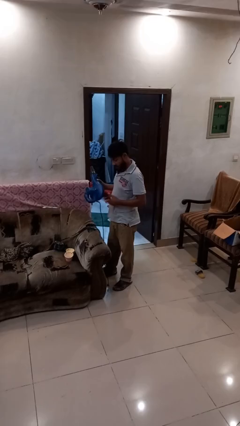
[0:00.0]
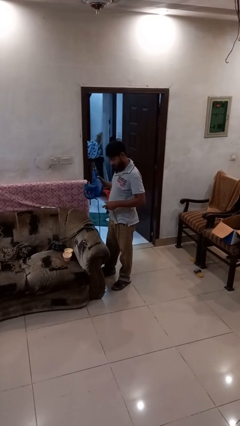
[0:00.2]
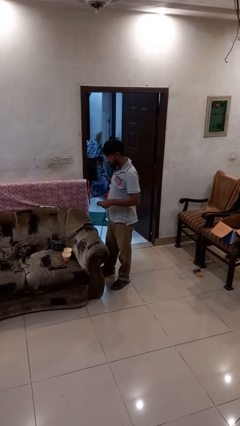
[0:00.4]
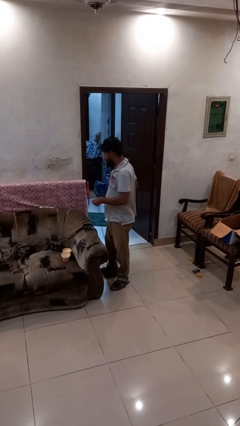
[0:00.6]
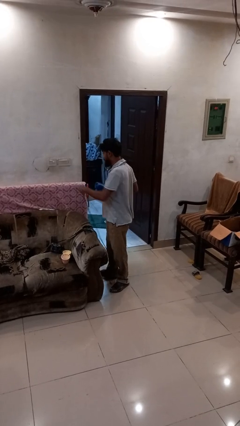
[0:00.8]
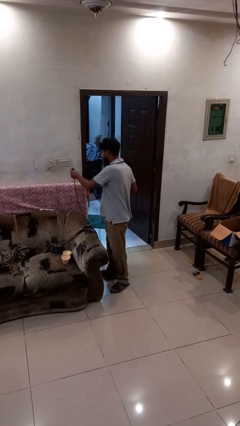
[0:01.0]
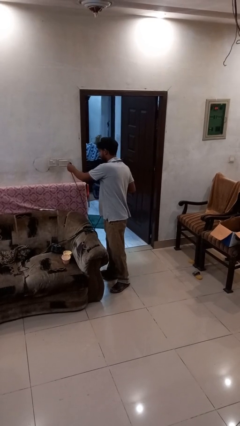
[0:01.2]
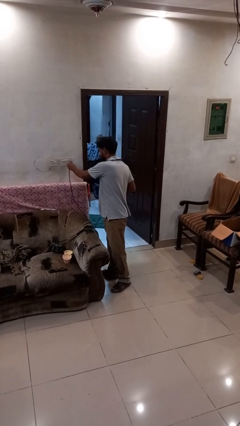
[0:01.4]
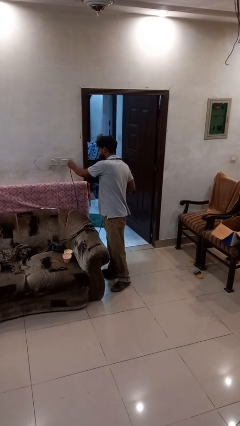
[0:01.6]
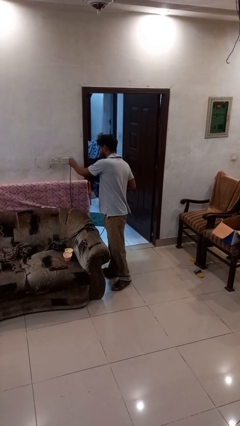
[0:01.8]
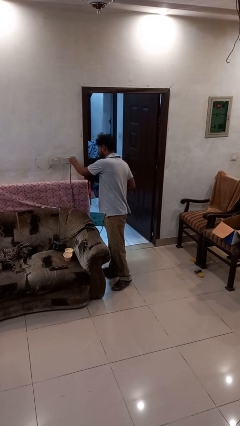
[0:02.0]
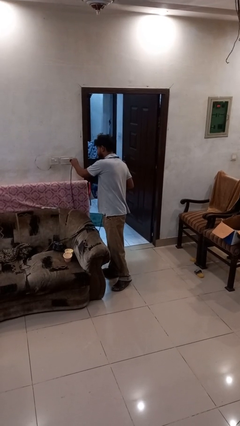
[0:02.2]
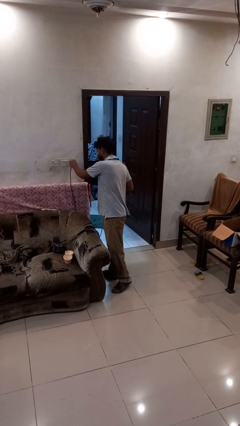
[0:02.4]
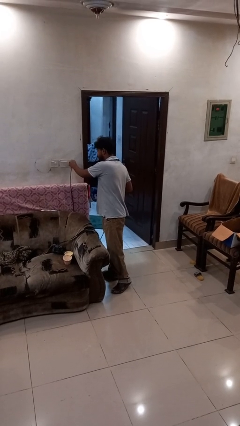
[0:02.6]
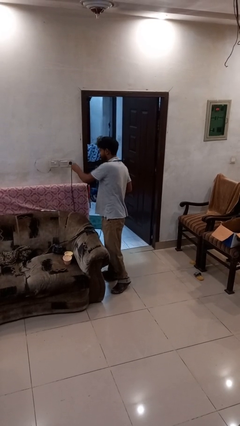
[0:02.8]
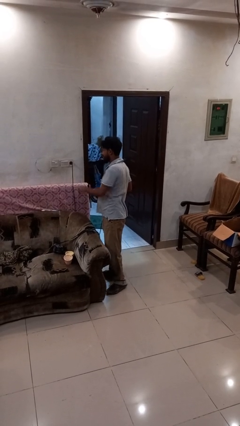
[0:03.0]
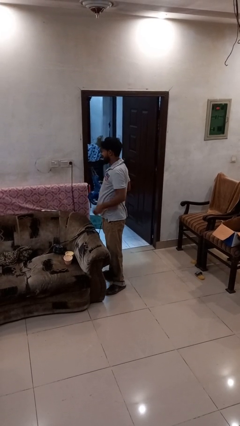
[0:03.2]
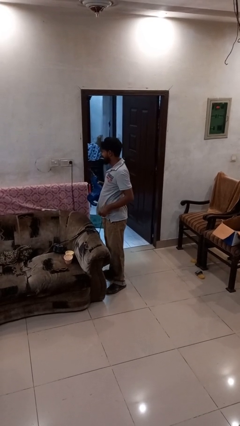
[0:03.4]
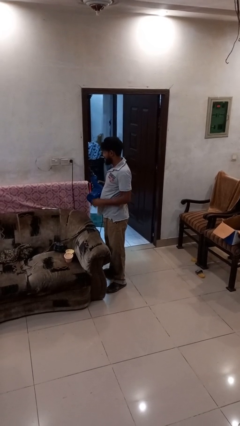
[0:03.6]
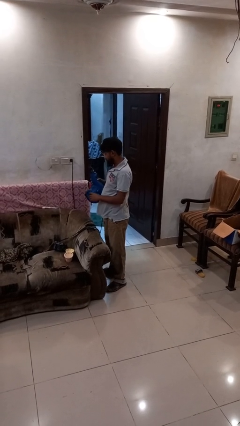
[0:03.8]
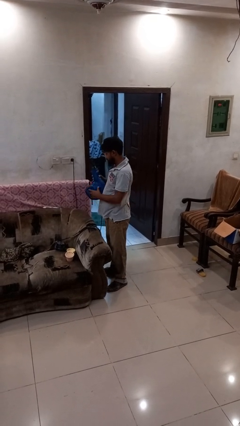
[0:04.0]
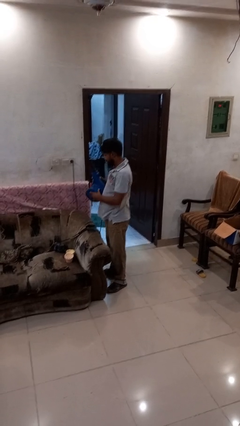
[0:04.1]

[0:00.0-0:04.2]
person plugs into electrical socket

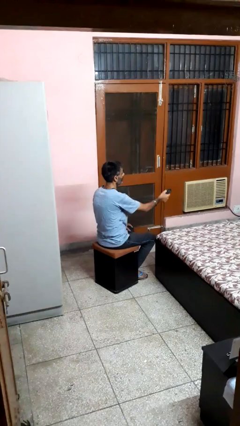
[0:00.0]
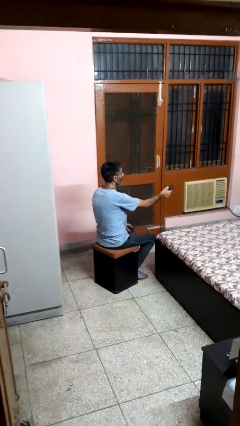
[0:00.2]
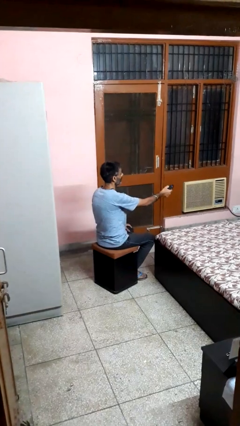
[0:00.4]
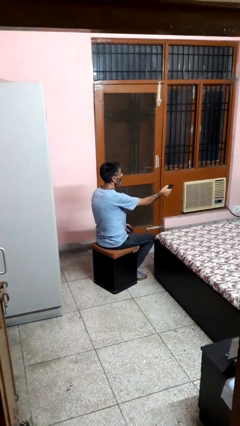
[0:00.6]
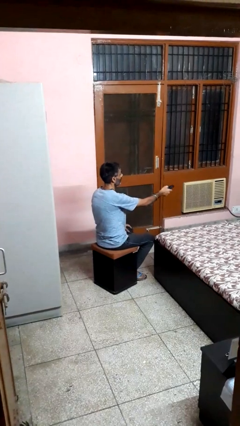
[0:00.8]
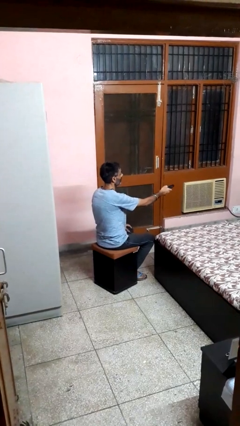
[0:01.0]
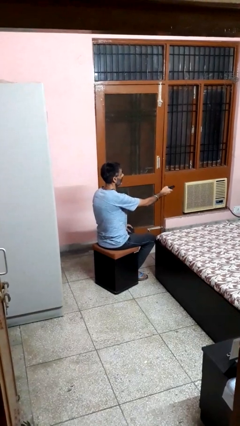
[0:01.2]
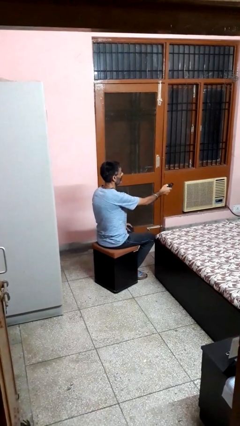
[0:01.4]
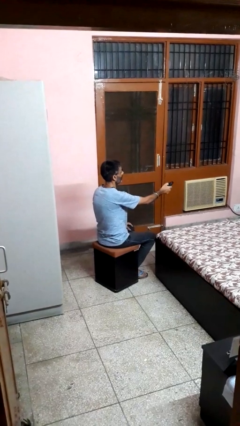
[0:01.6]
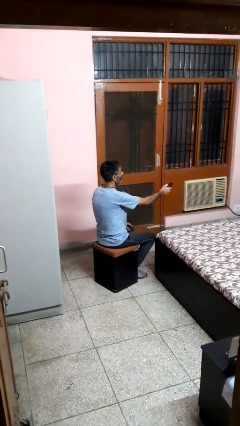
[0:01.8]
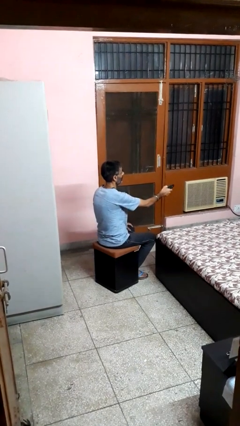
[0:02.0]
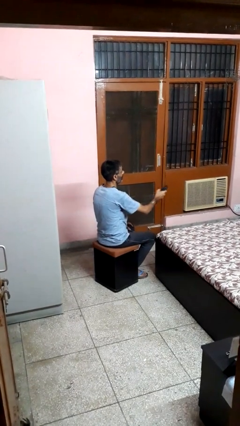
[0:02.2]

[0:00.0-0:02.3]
person uses television remote

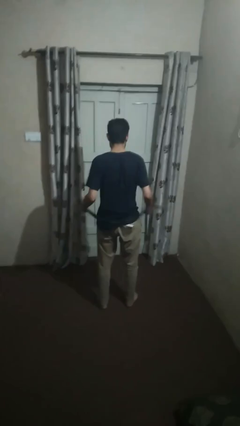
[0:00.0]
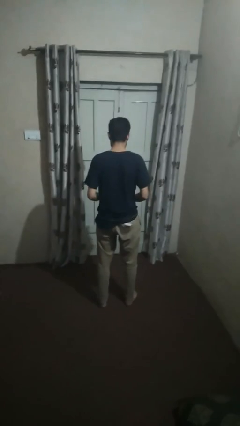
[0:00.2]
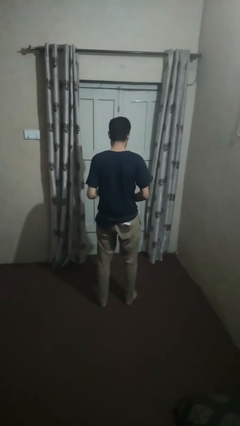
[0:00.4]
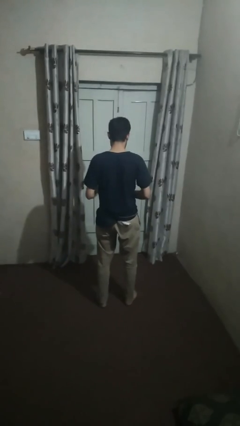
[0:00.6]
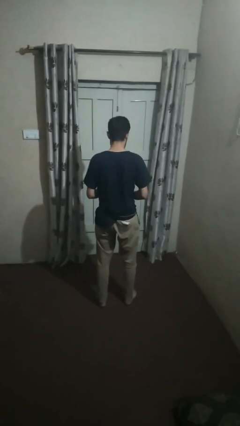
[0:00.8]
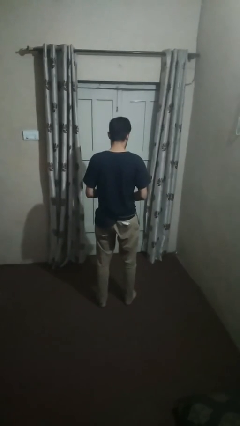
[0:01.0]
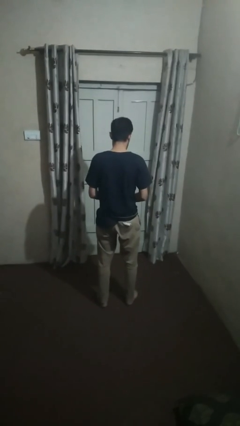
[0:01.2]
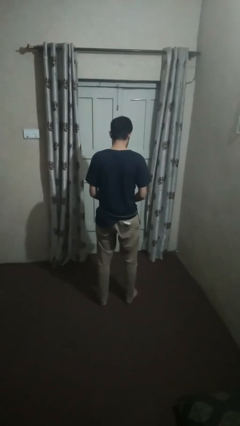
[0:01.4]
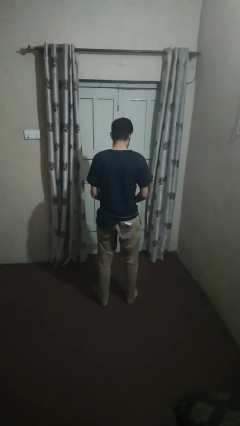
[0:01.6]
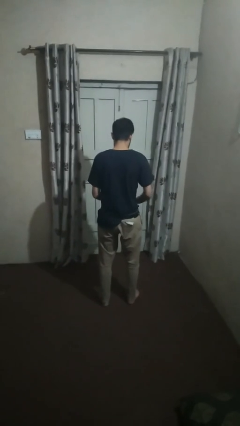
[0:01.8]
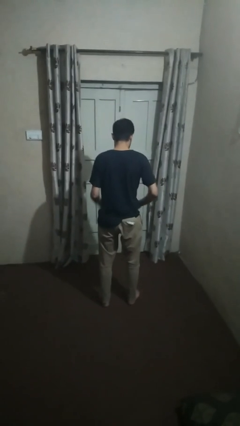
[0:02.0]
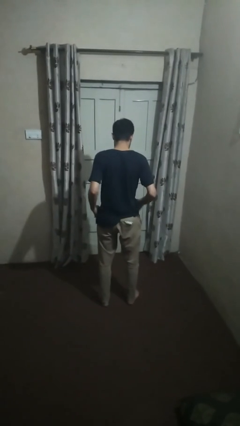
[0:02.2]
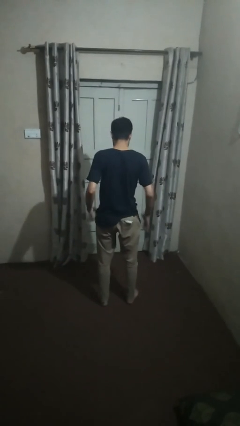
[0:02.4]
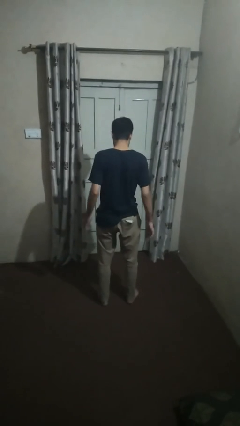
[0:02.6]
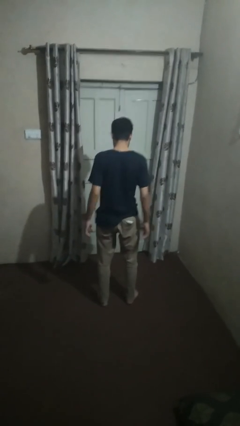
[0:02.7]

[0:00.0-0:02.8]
person puts on belt

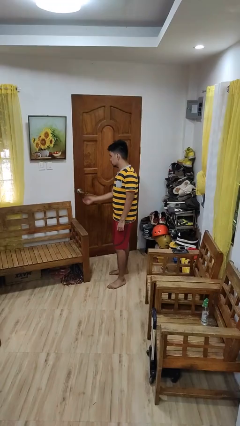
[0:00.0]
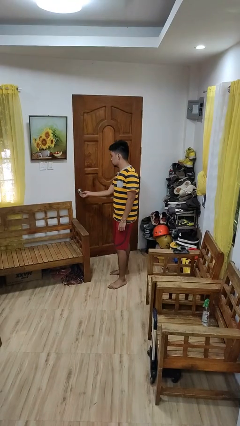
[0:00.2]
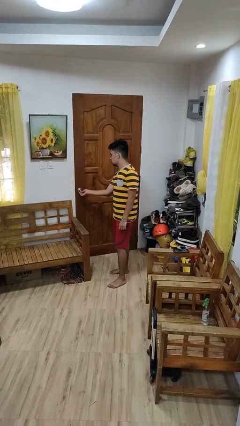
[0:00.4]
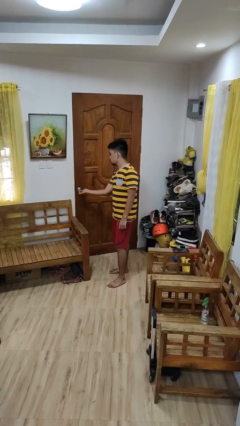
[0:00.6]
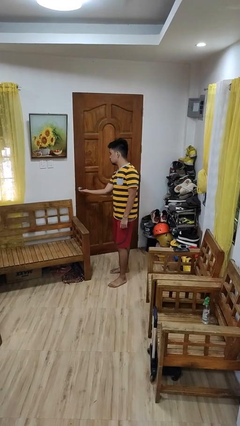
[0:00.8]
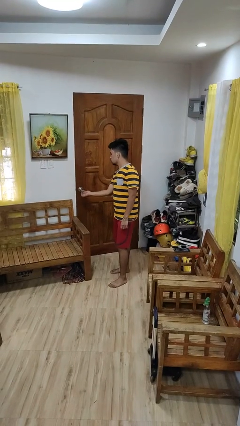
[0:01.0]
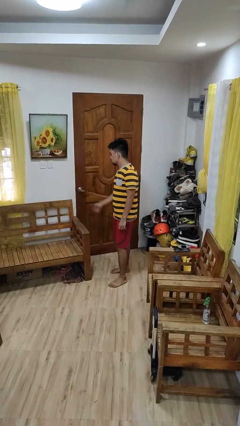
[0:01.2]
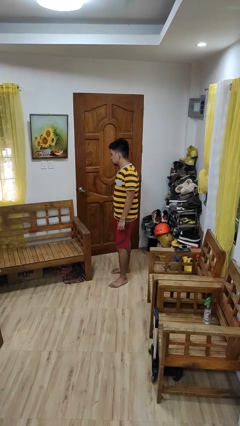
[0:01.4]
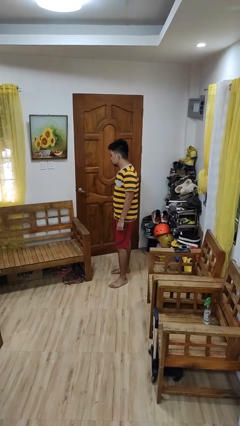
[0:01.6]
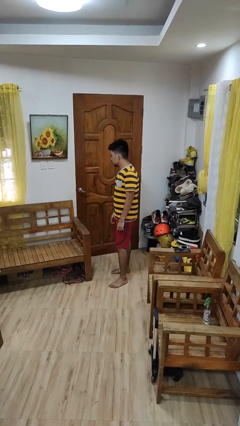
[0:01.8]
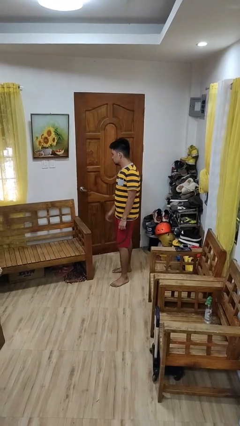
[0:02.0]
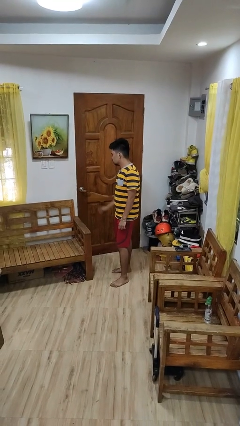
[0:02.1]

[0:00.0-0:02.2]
person unlocks door with keys

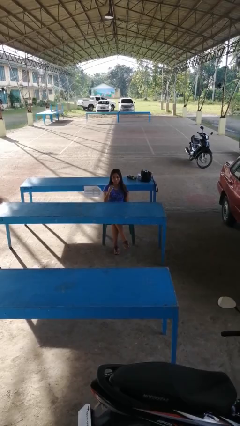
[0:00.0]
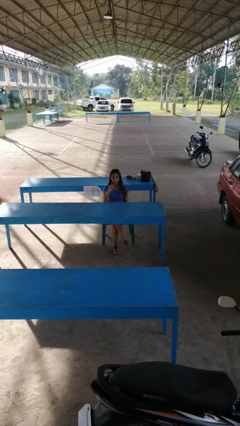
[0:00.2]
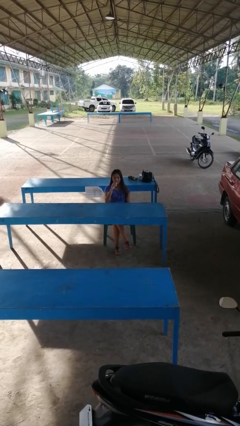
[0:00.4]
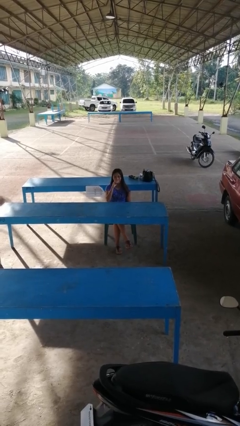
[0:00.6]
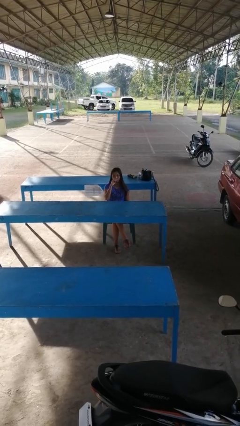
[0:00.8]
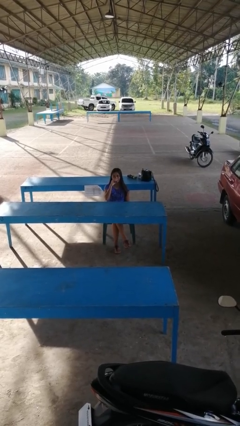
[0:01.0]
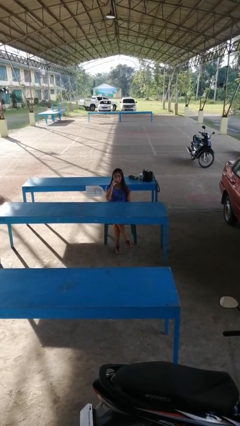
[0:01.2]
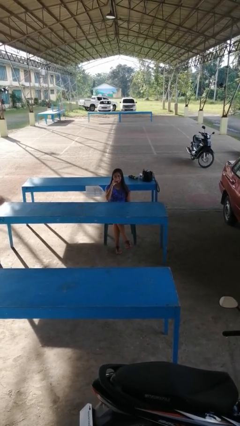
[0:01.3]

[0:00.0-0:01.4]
person drinks from shotglass

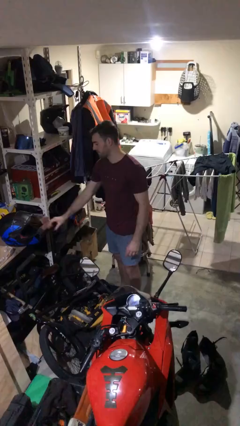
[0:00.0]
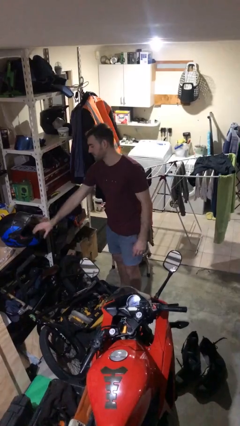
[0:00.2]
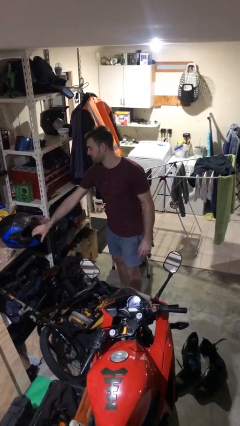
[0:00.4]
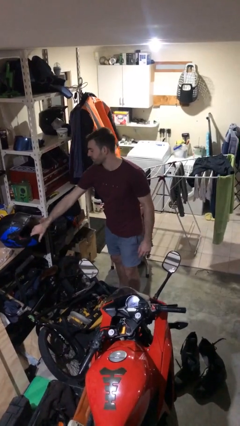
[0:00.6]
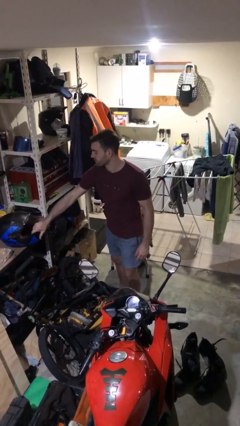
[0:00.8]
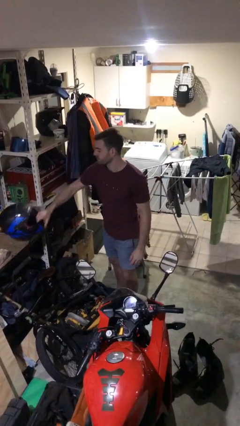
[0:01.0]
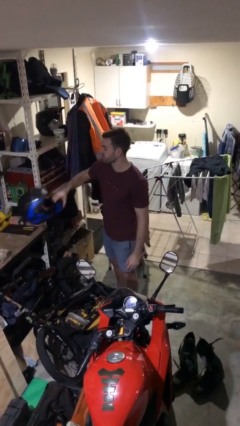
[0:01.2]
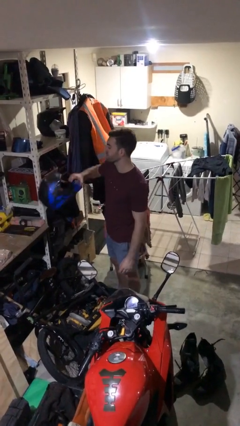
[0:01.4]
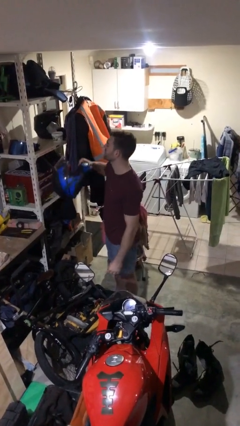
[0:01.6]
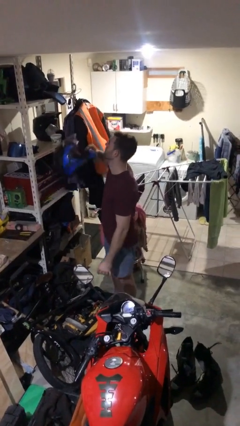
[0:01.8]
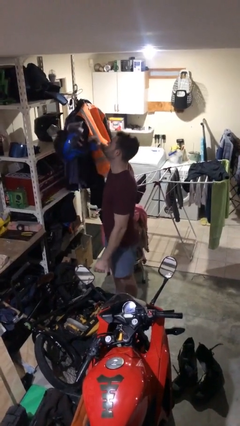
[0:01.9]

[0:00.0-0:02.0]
person picks up object from table

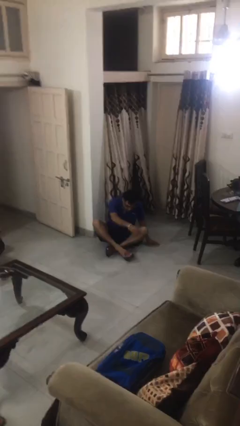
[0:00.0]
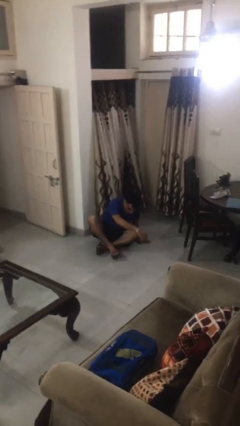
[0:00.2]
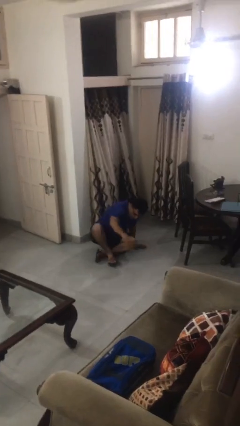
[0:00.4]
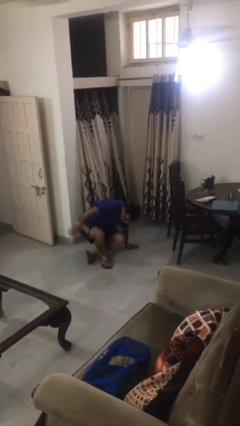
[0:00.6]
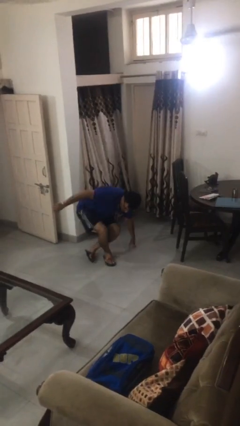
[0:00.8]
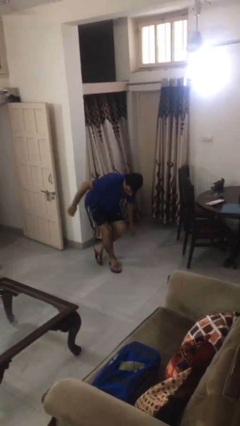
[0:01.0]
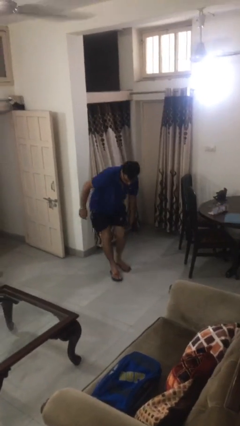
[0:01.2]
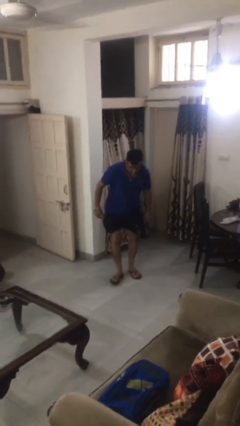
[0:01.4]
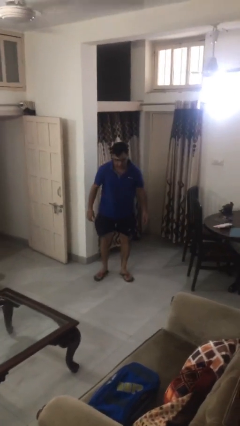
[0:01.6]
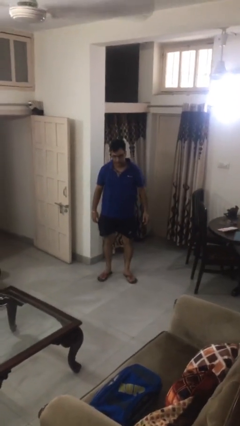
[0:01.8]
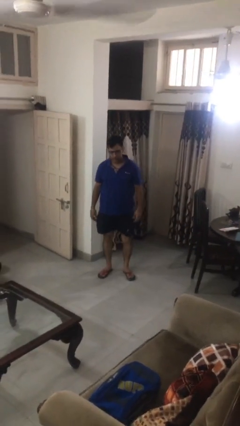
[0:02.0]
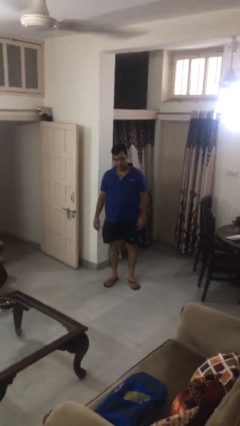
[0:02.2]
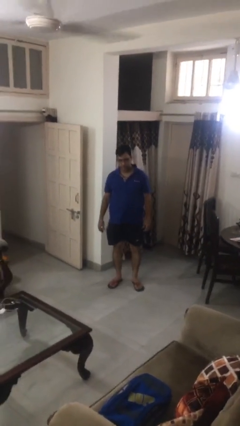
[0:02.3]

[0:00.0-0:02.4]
person stands up from floor
